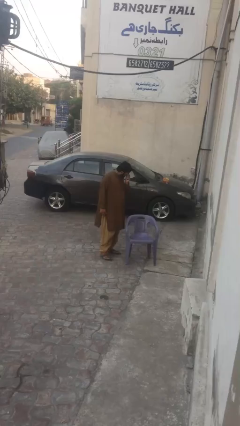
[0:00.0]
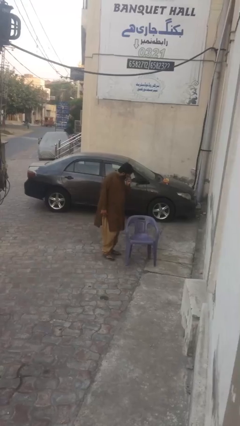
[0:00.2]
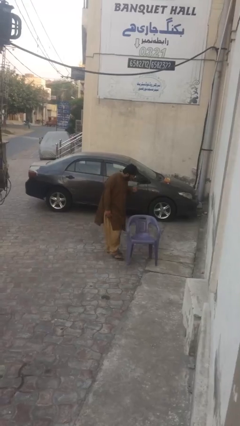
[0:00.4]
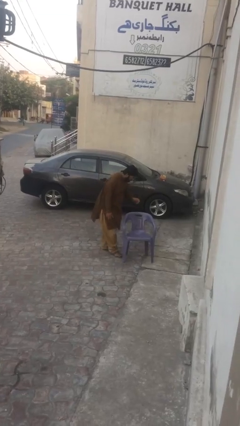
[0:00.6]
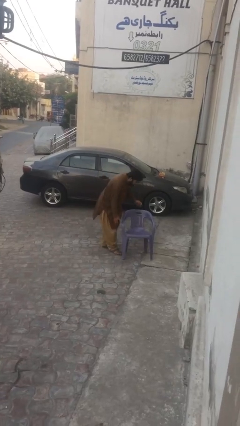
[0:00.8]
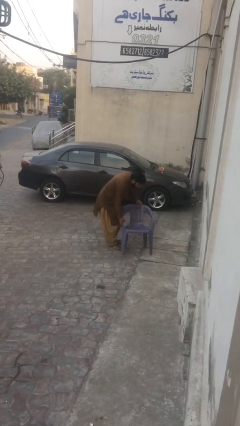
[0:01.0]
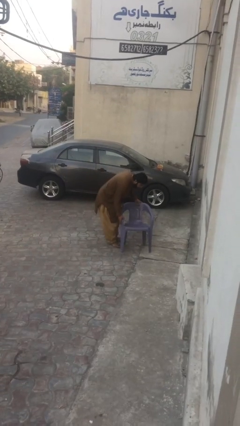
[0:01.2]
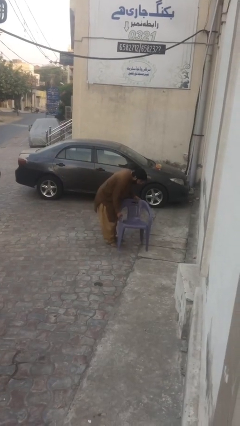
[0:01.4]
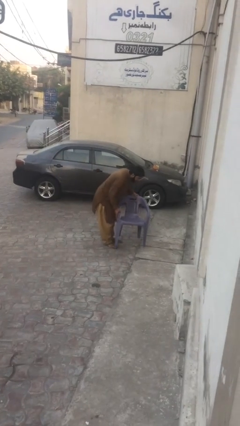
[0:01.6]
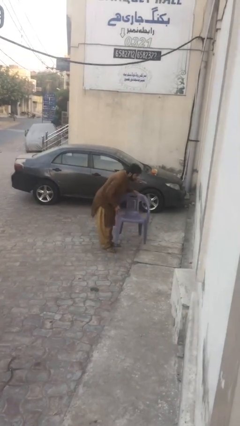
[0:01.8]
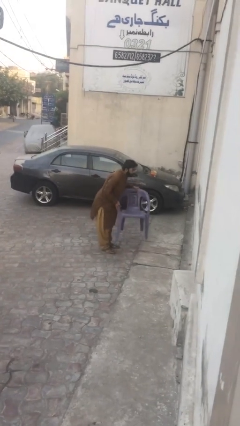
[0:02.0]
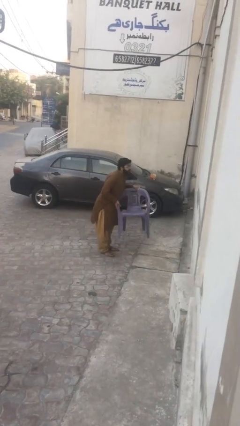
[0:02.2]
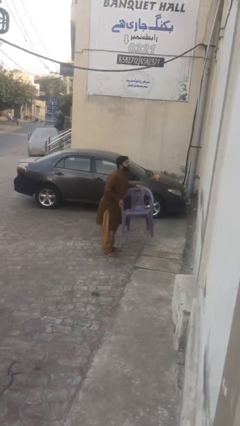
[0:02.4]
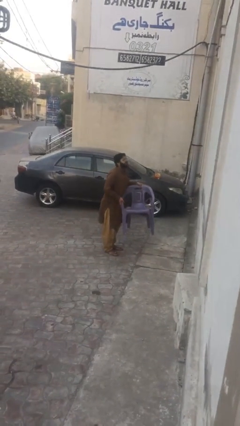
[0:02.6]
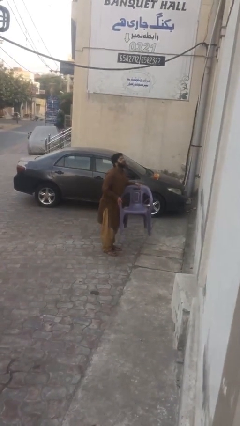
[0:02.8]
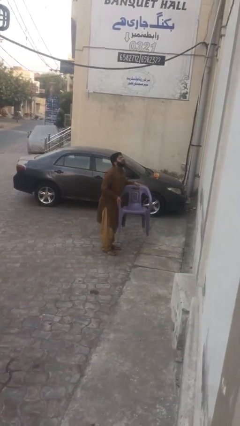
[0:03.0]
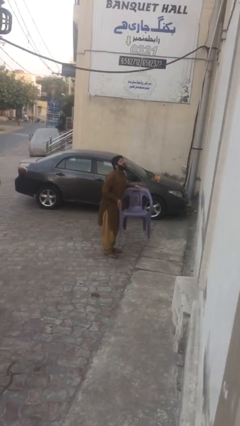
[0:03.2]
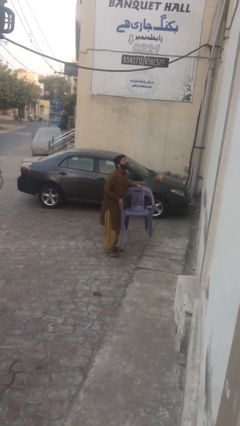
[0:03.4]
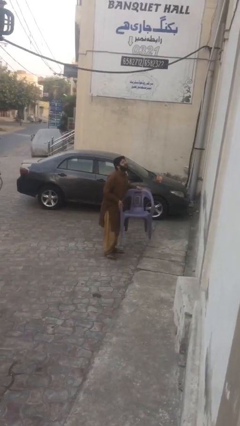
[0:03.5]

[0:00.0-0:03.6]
person picks up object from floor

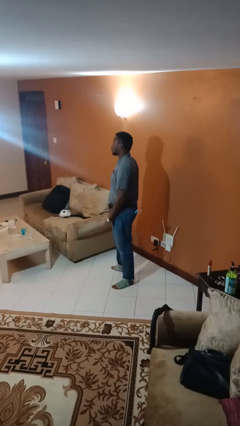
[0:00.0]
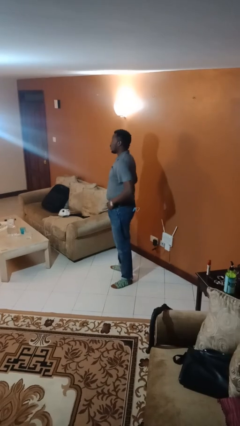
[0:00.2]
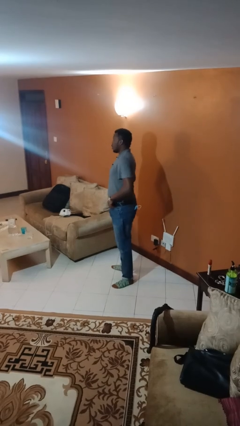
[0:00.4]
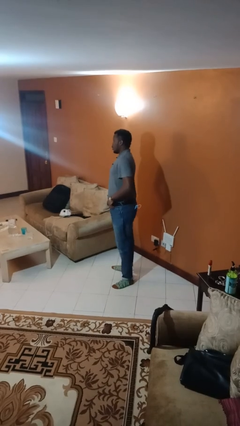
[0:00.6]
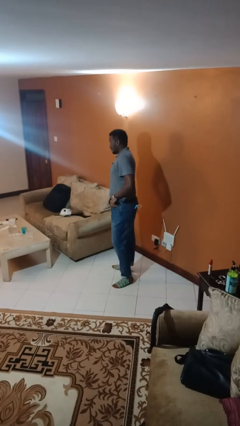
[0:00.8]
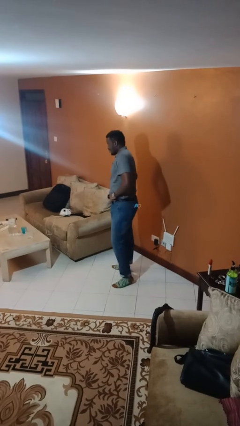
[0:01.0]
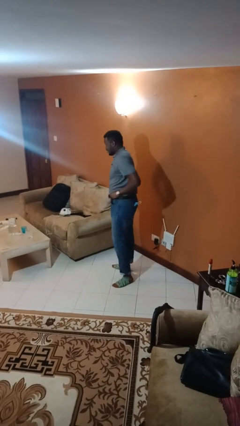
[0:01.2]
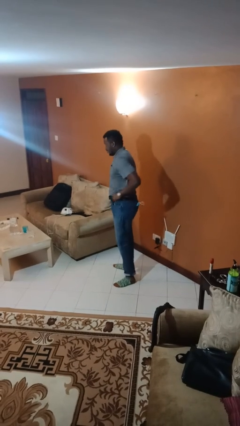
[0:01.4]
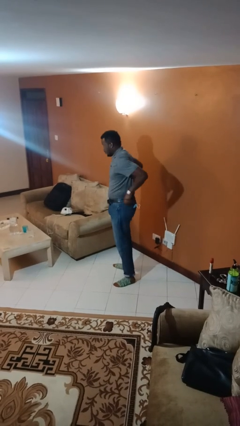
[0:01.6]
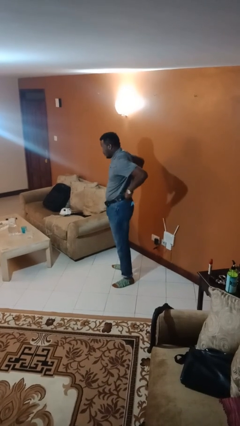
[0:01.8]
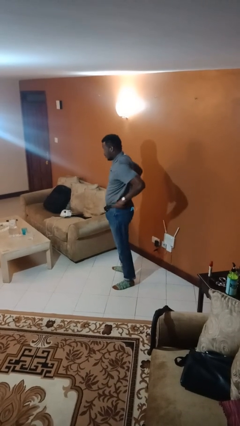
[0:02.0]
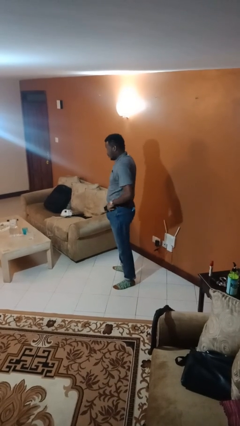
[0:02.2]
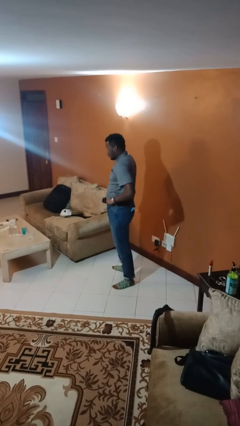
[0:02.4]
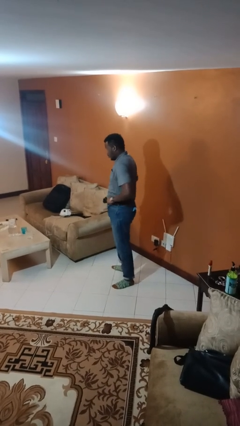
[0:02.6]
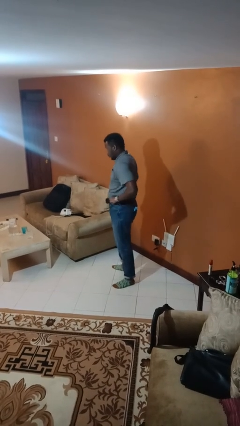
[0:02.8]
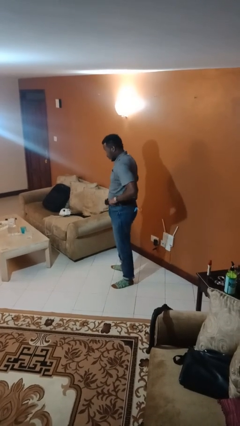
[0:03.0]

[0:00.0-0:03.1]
person hikes up pants

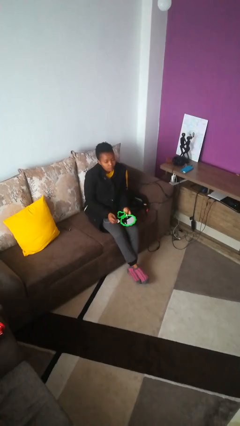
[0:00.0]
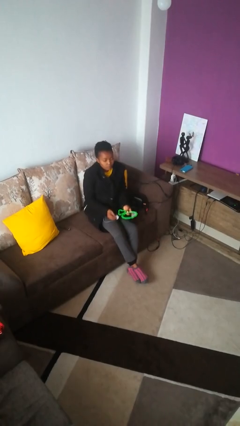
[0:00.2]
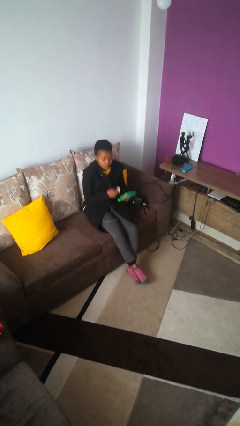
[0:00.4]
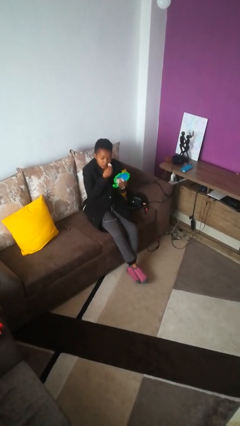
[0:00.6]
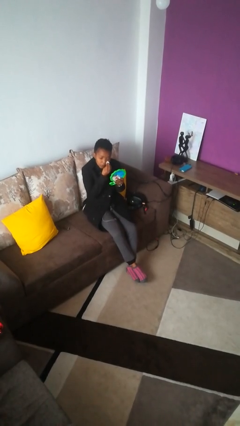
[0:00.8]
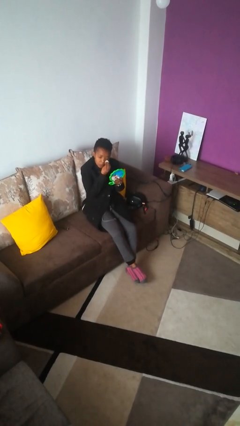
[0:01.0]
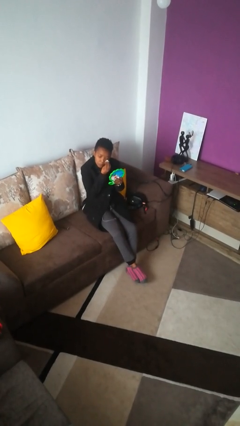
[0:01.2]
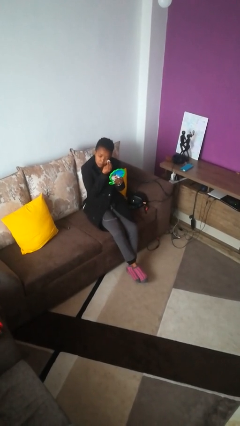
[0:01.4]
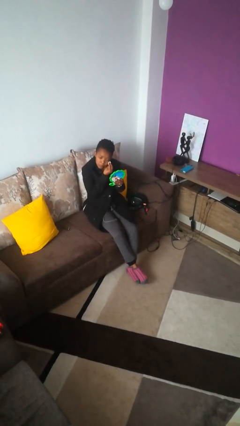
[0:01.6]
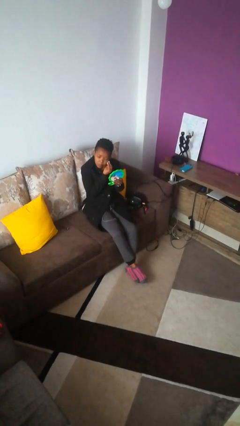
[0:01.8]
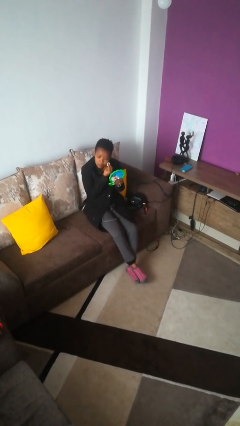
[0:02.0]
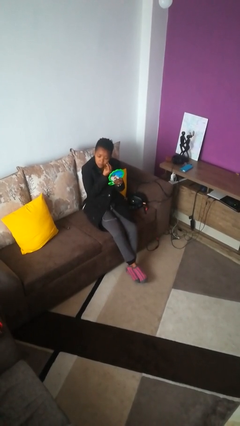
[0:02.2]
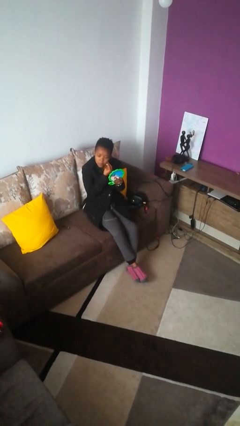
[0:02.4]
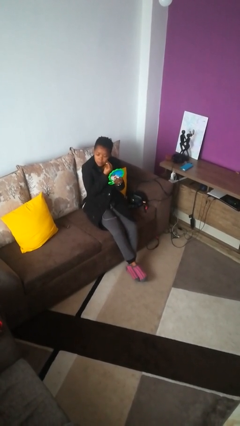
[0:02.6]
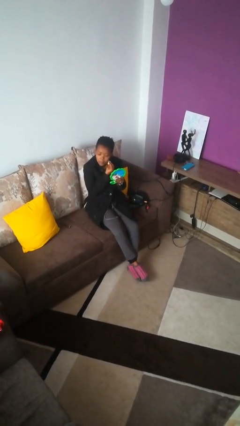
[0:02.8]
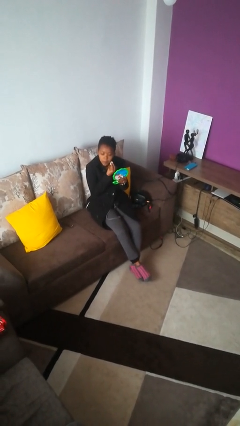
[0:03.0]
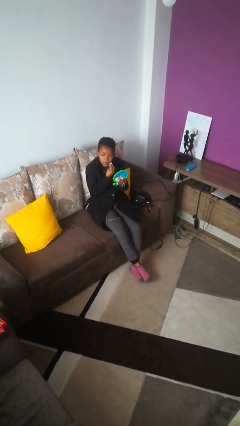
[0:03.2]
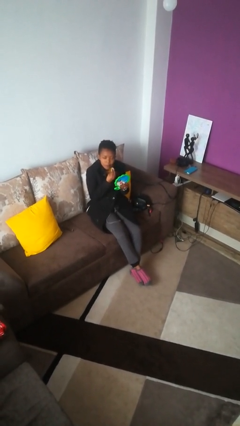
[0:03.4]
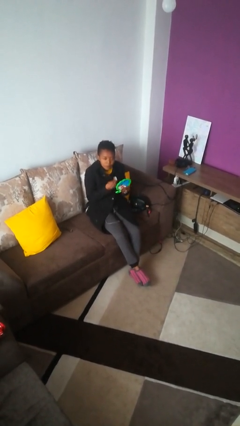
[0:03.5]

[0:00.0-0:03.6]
person applies foundation makeup

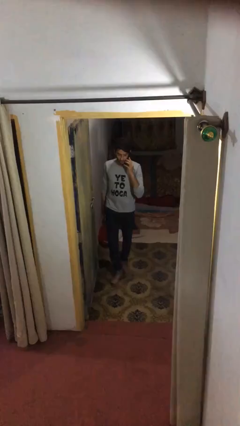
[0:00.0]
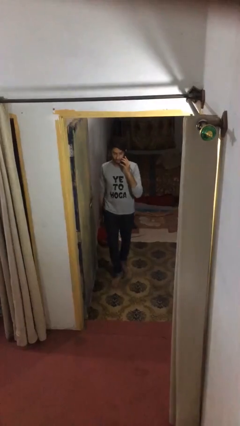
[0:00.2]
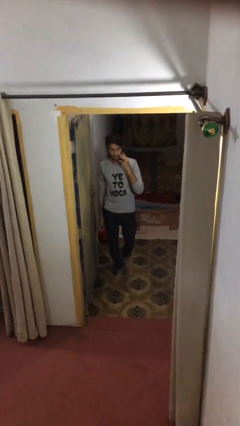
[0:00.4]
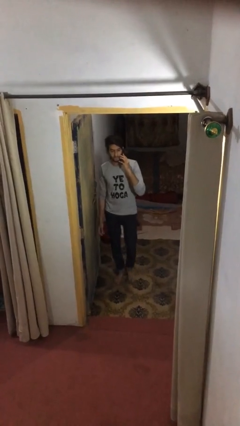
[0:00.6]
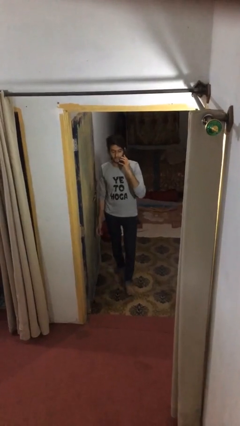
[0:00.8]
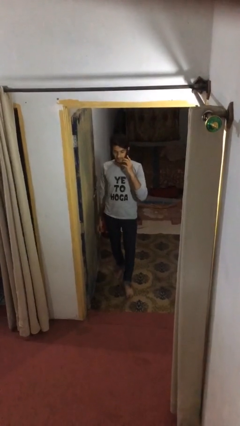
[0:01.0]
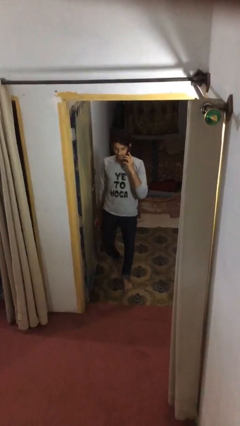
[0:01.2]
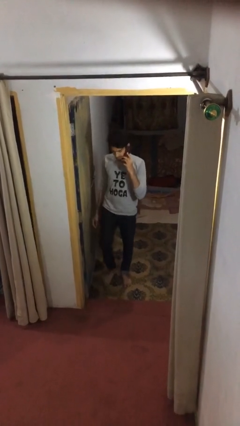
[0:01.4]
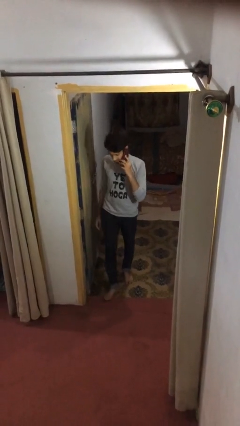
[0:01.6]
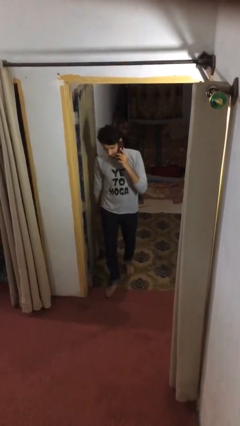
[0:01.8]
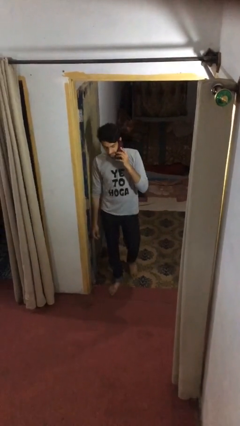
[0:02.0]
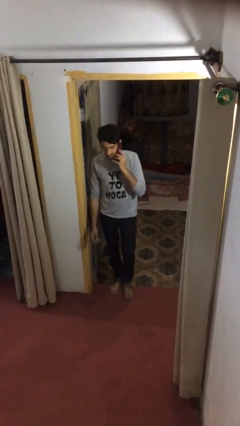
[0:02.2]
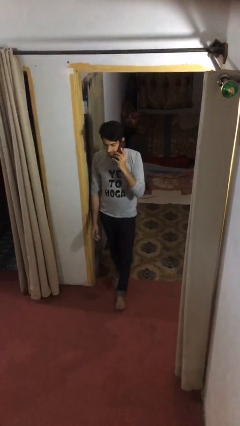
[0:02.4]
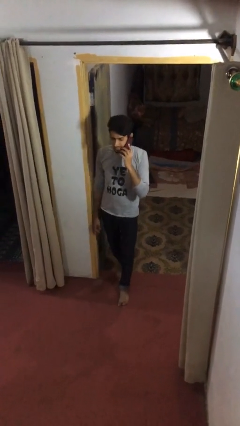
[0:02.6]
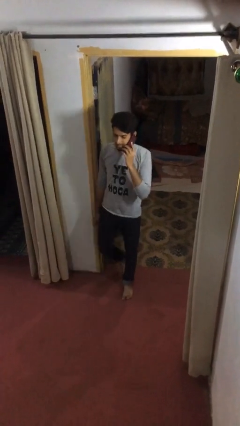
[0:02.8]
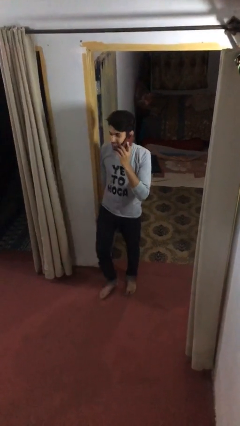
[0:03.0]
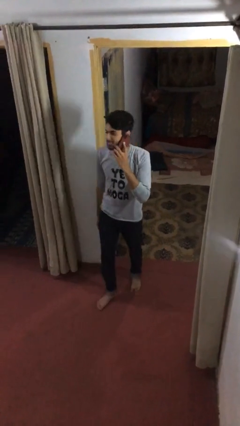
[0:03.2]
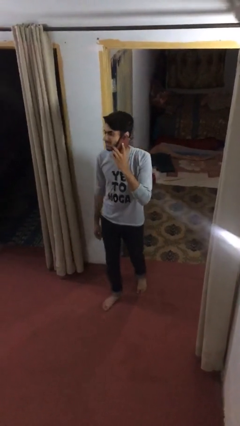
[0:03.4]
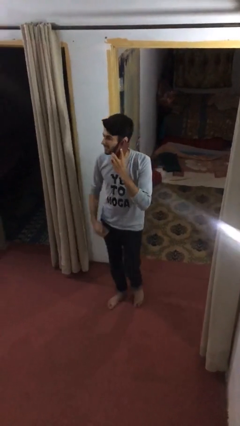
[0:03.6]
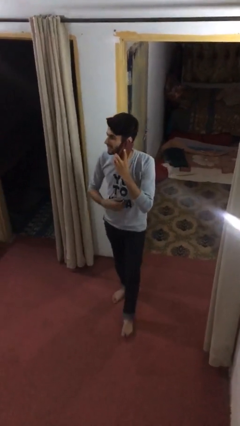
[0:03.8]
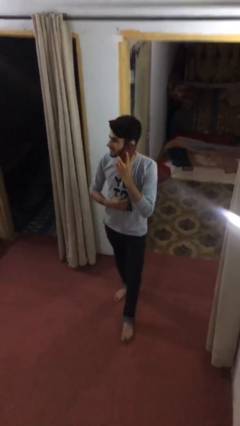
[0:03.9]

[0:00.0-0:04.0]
person enters scene through structure

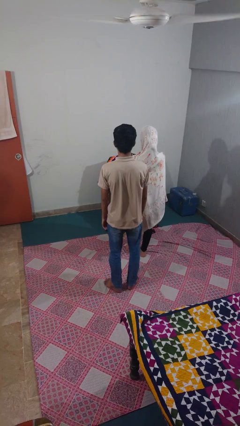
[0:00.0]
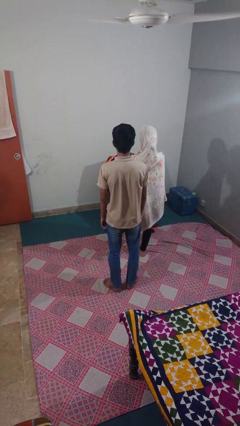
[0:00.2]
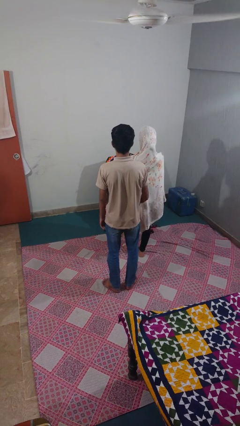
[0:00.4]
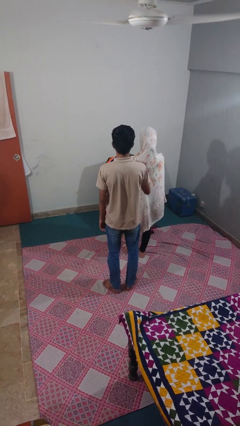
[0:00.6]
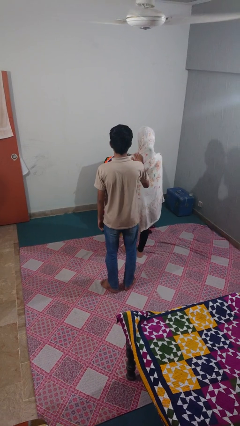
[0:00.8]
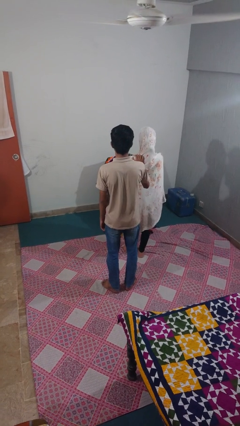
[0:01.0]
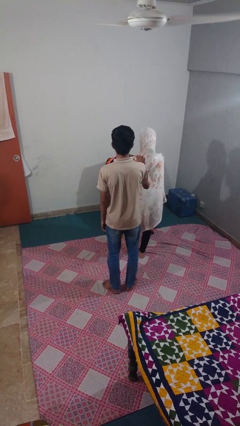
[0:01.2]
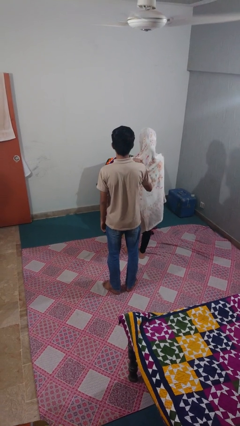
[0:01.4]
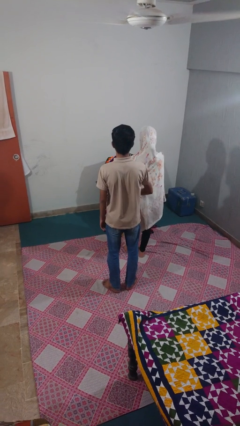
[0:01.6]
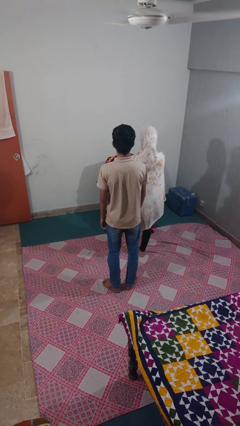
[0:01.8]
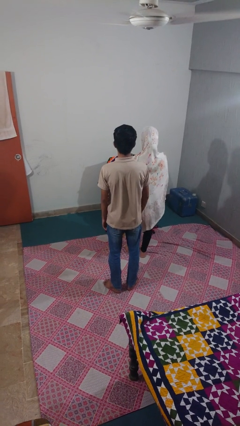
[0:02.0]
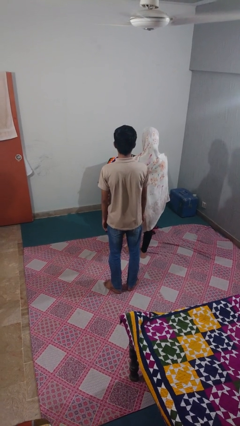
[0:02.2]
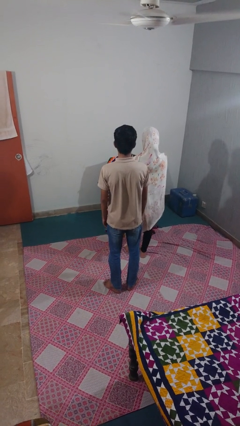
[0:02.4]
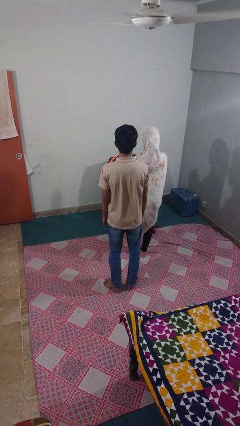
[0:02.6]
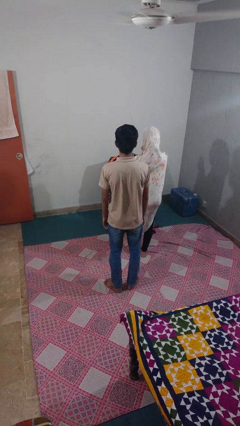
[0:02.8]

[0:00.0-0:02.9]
person touches back of person

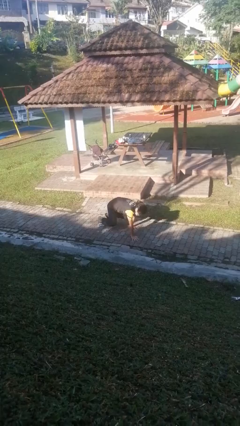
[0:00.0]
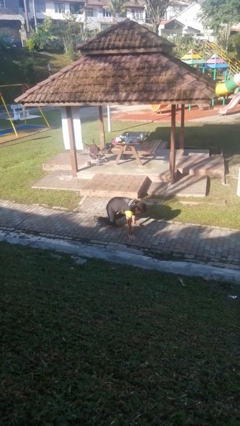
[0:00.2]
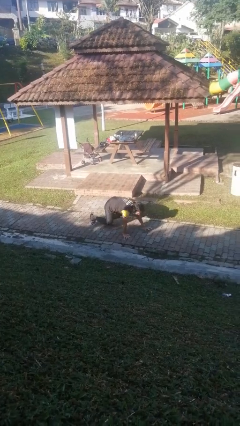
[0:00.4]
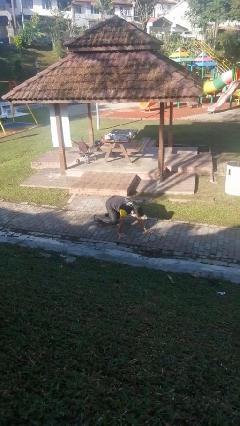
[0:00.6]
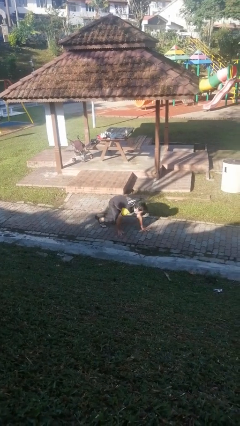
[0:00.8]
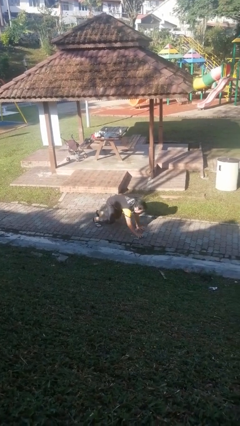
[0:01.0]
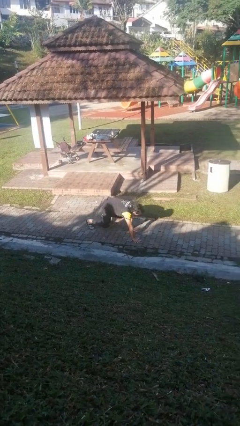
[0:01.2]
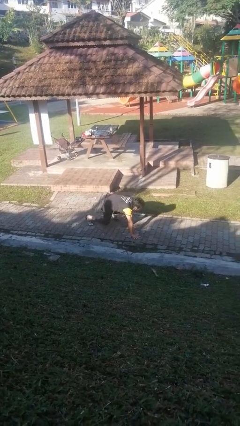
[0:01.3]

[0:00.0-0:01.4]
person crawls
